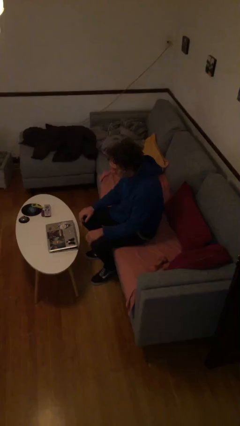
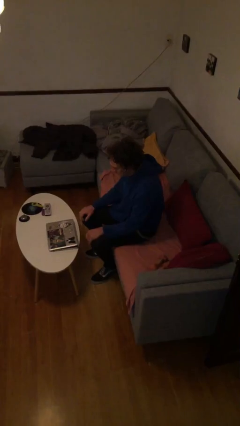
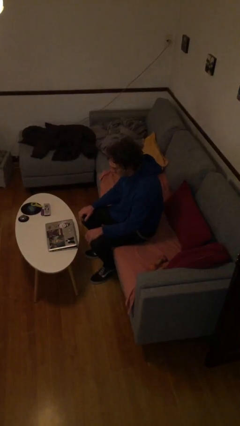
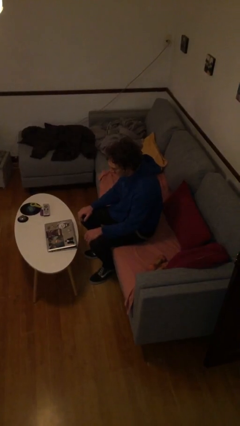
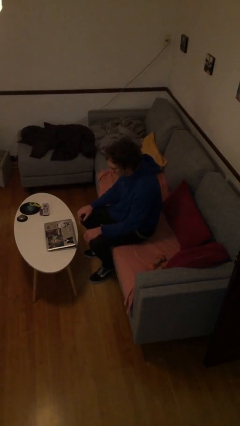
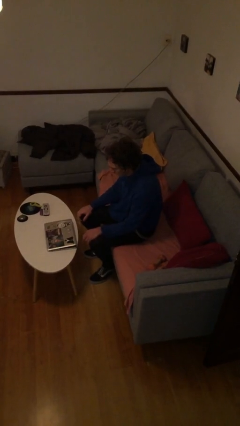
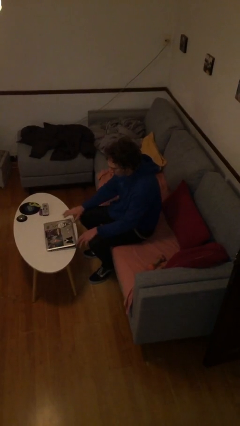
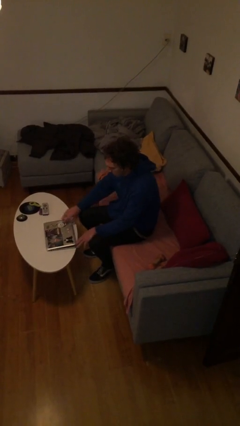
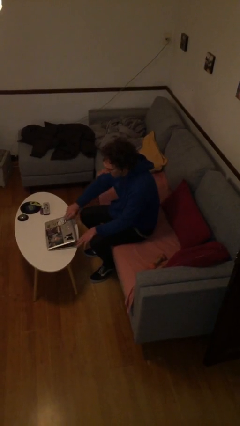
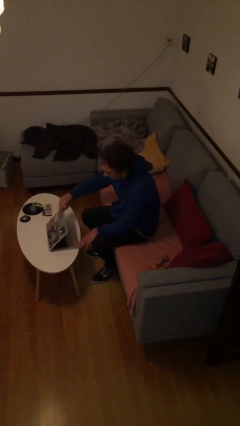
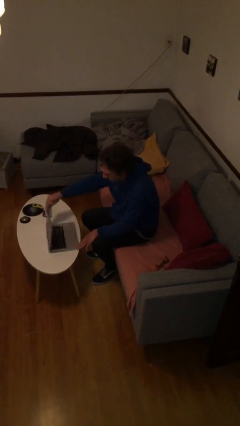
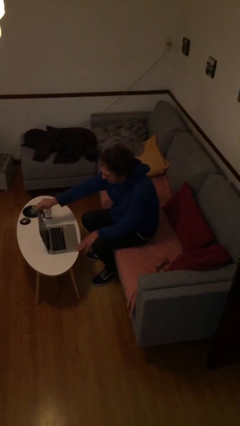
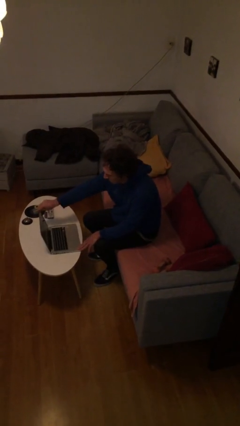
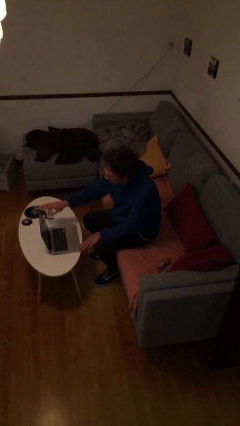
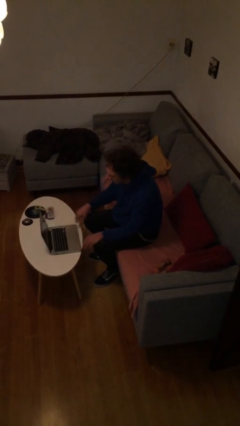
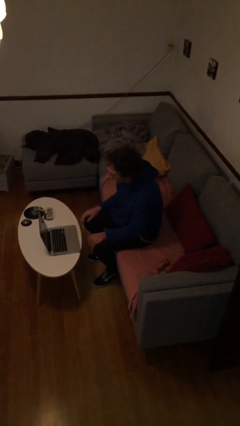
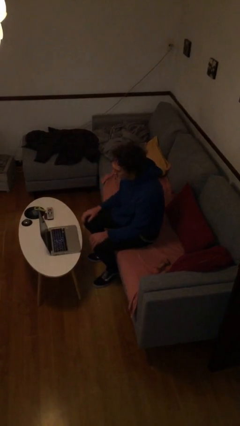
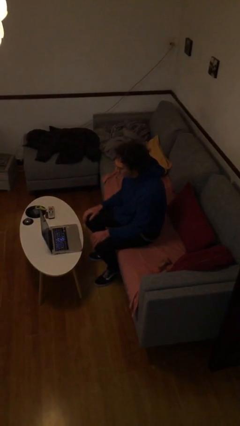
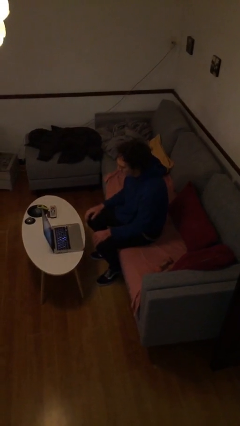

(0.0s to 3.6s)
person opens laptop

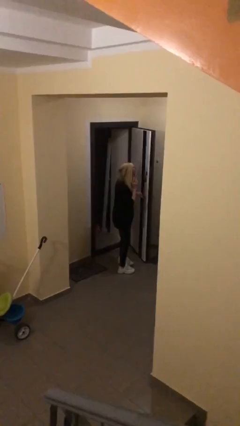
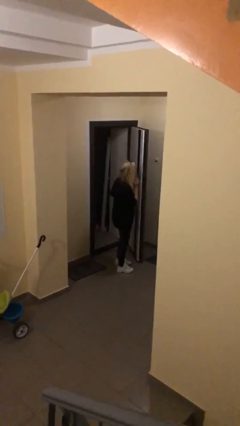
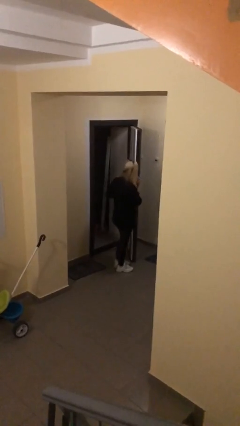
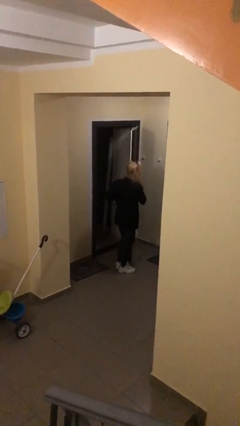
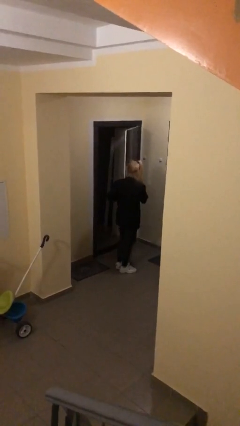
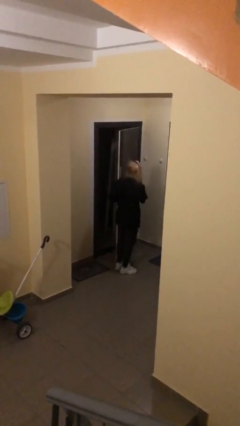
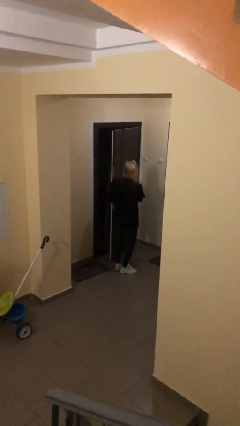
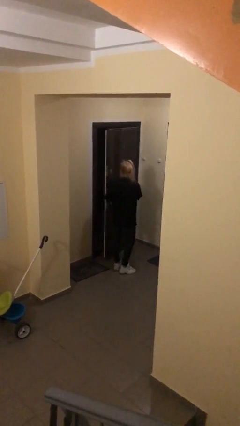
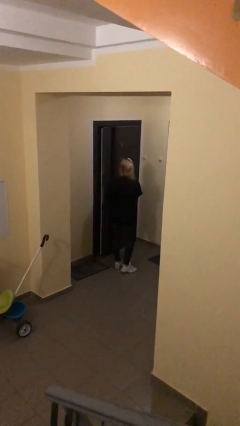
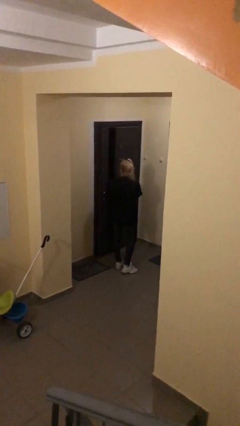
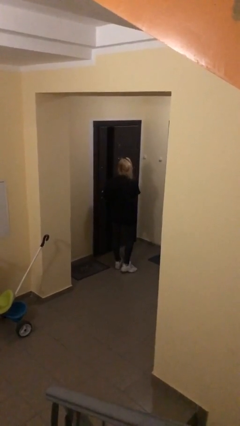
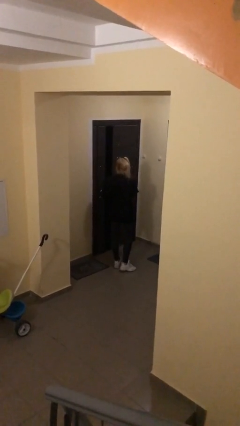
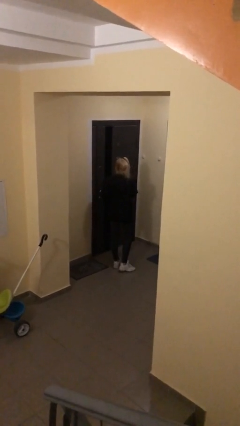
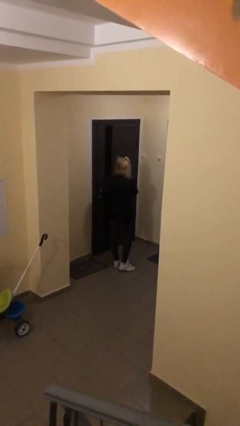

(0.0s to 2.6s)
person closes facility door

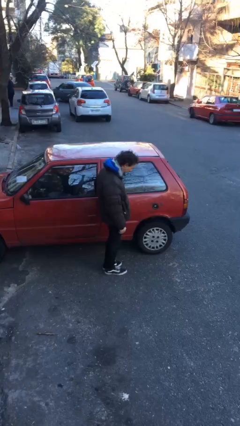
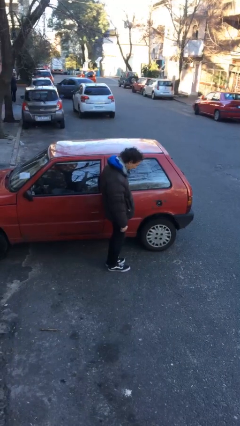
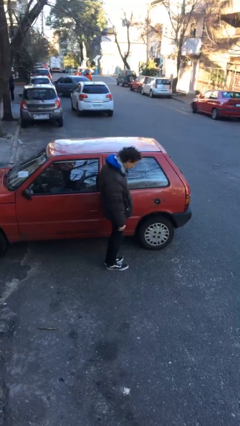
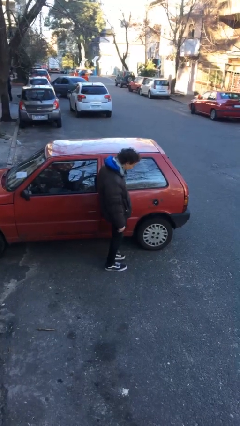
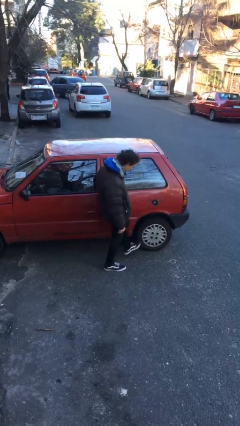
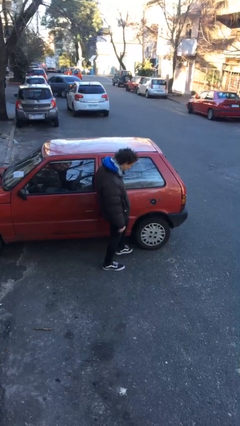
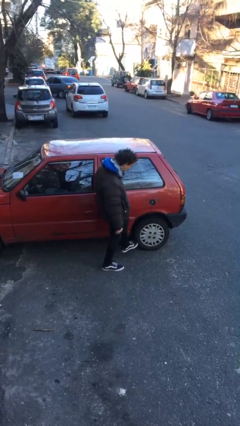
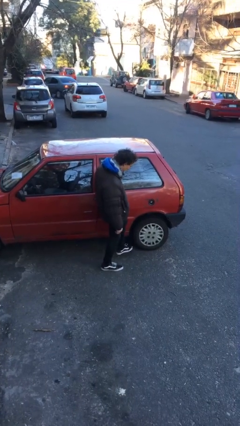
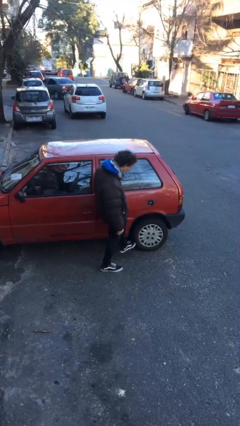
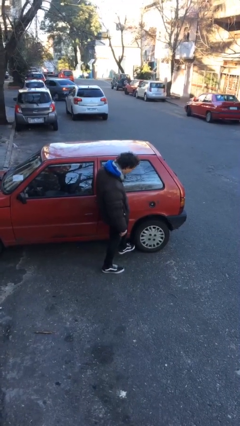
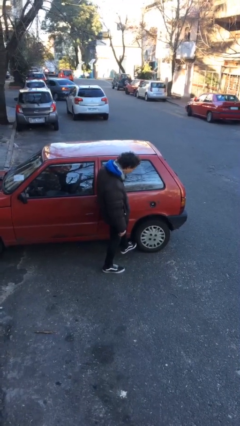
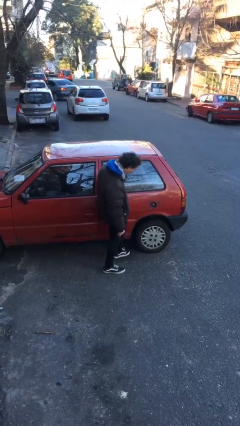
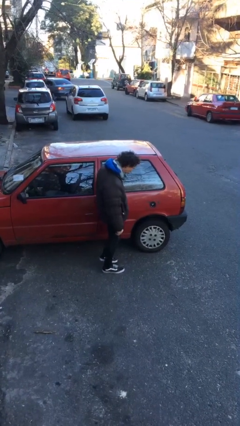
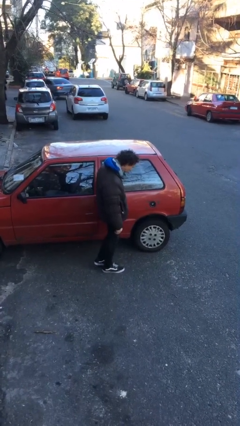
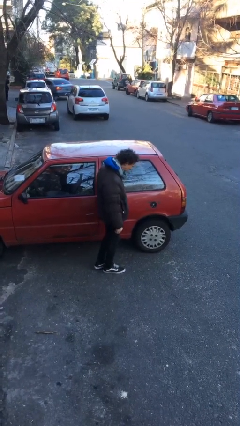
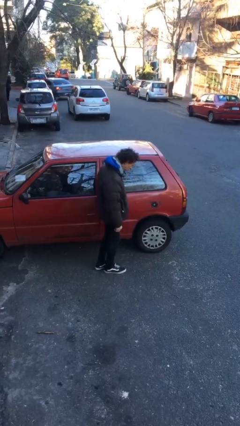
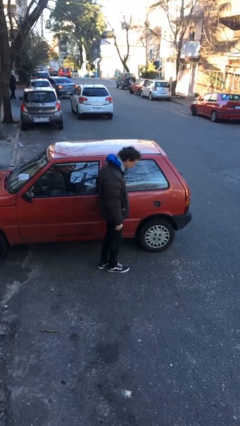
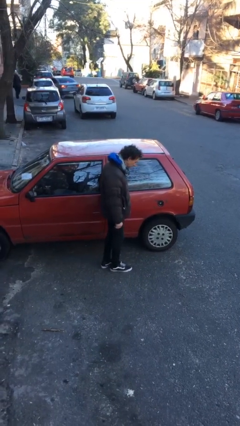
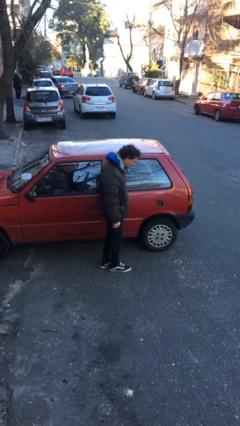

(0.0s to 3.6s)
person kicks car tires

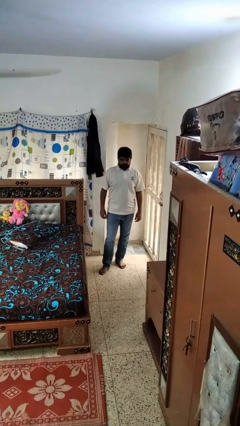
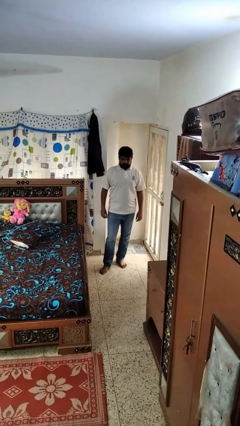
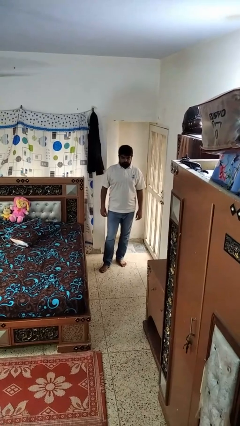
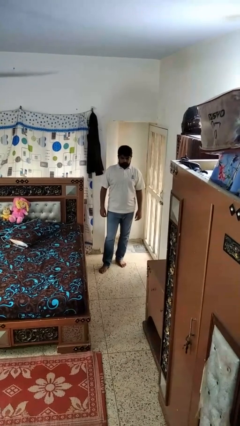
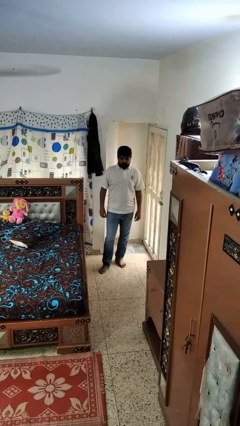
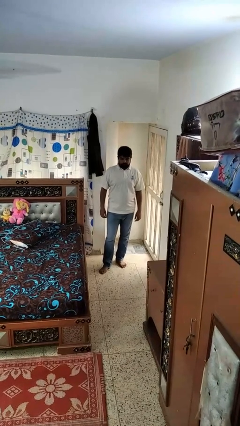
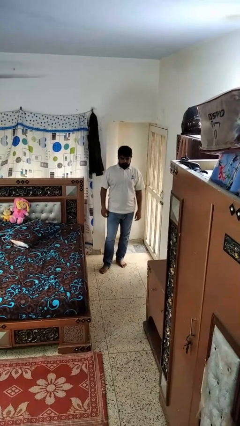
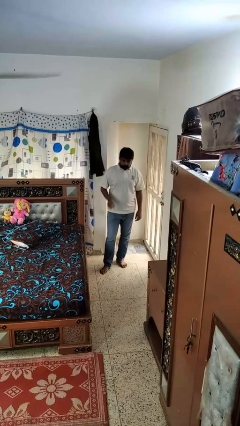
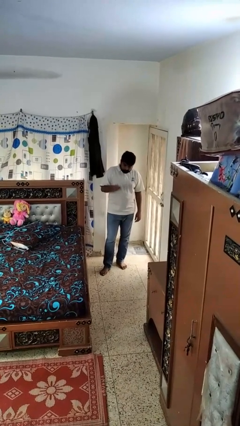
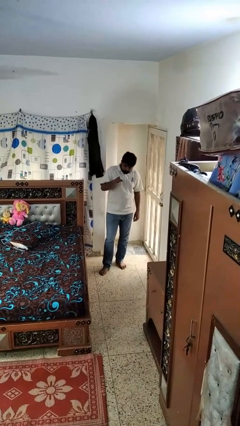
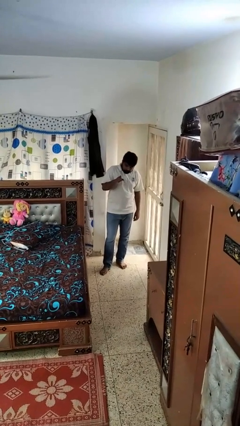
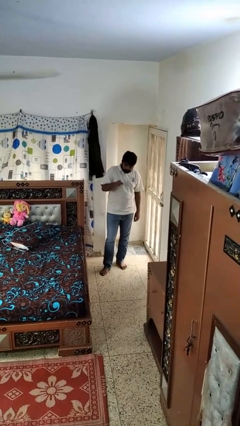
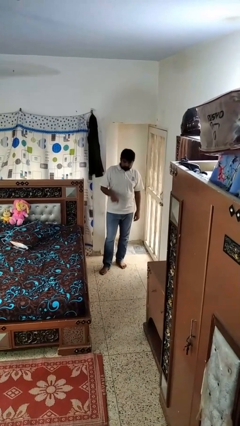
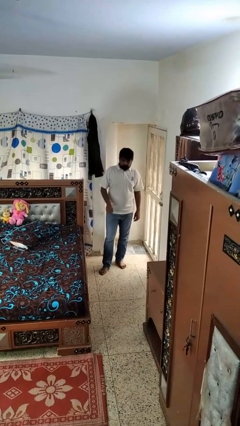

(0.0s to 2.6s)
person points at person

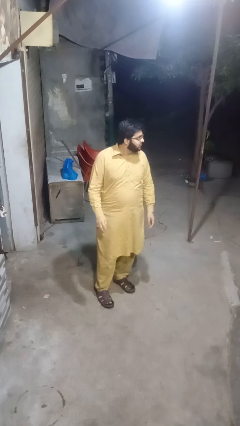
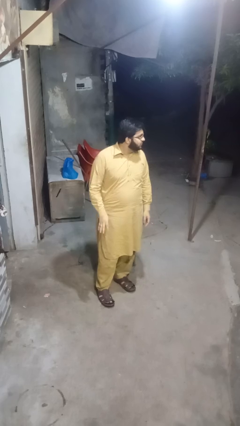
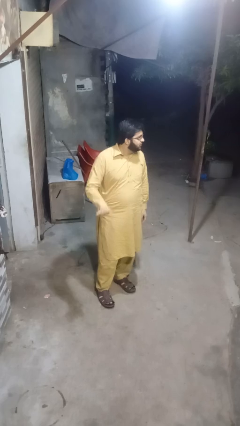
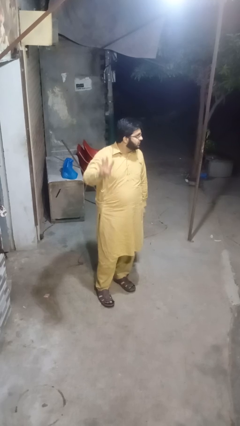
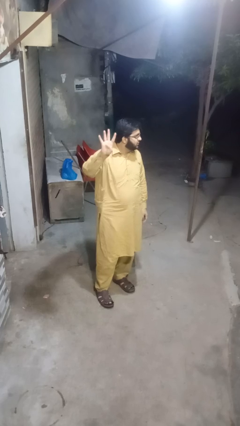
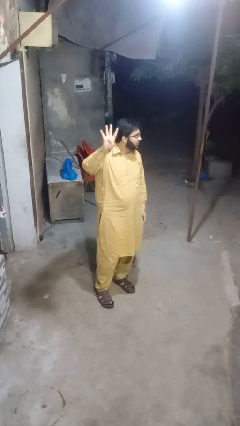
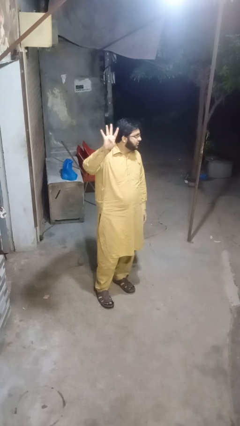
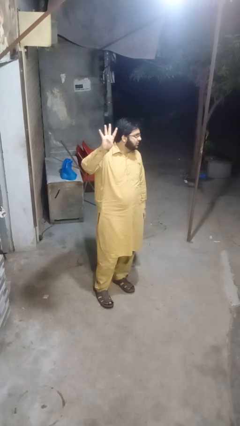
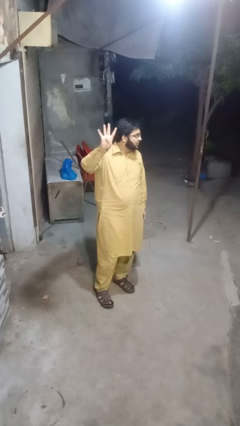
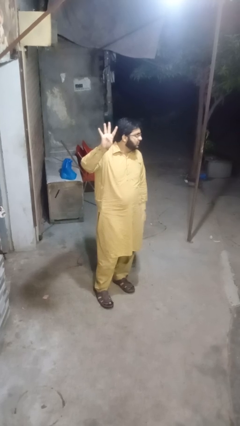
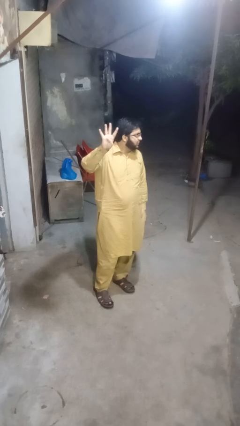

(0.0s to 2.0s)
person gestures number four

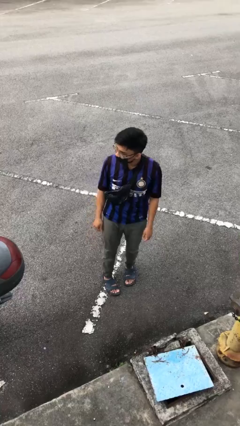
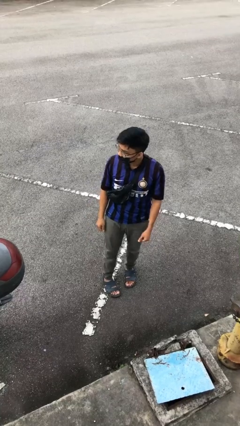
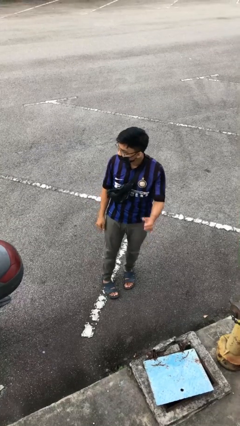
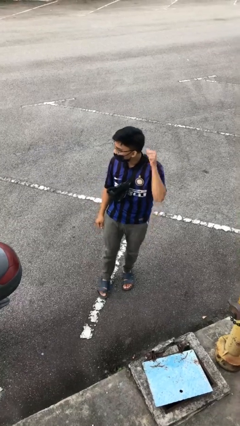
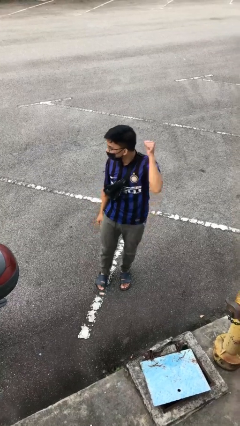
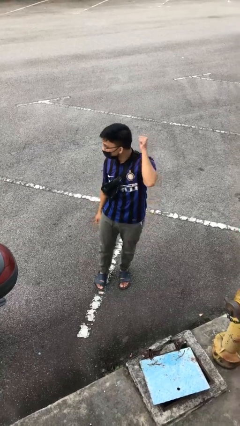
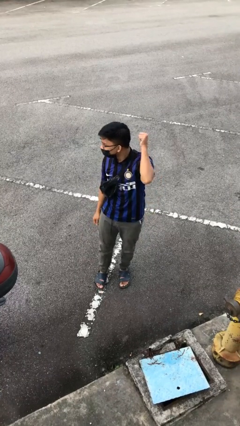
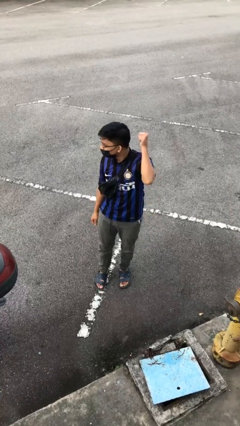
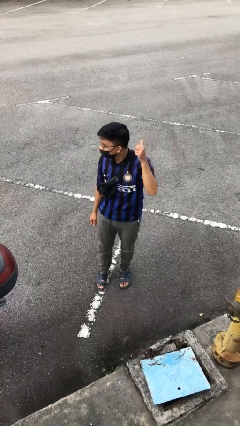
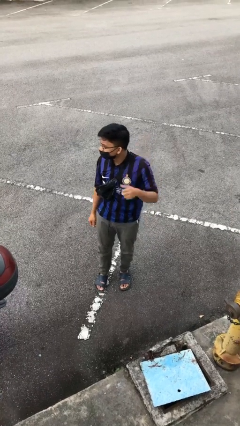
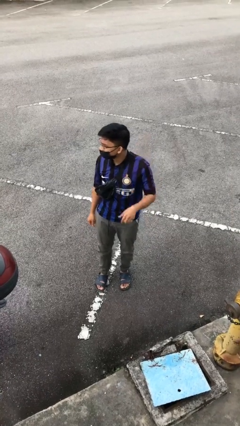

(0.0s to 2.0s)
person gestures behind me

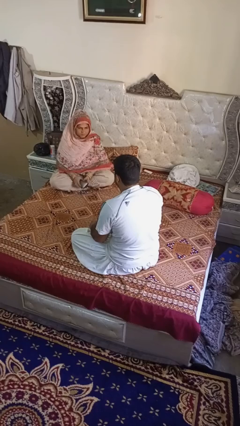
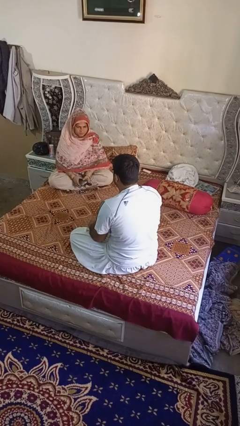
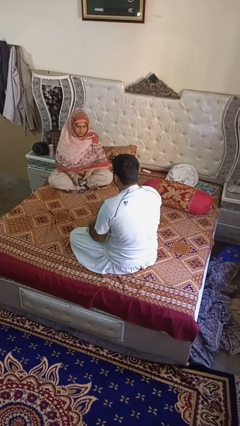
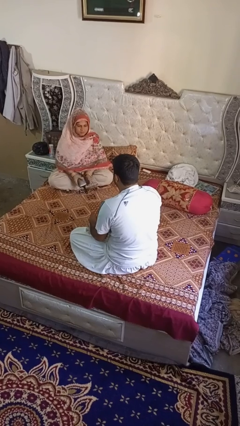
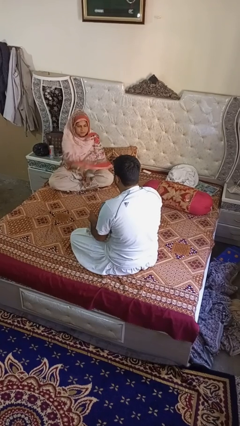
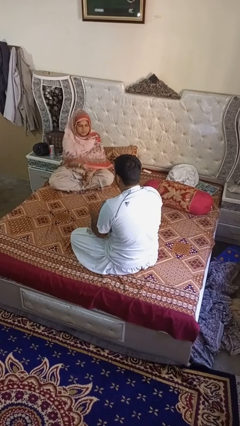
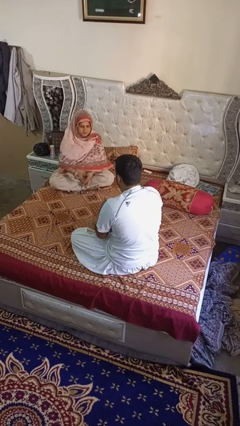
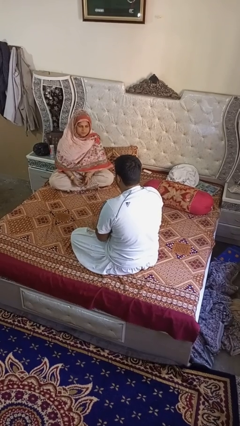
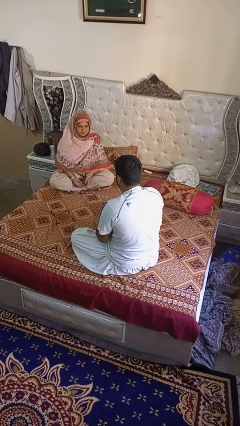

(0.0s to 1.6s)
person catches object from person
